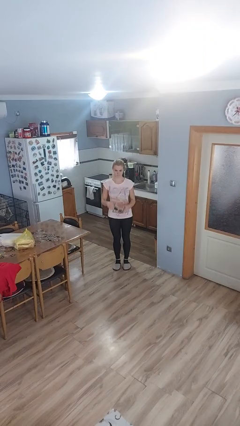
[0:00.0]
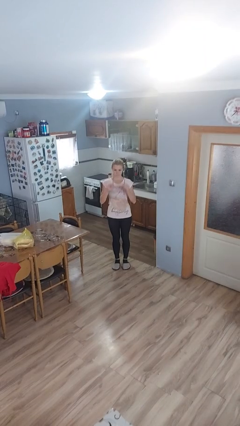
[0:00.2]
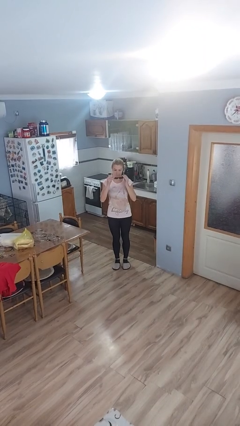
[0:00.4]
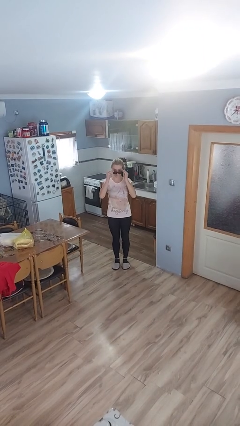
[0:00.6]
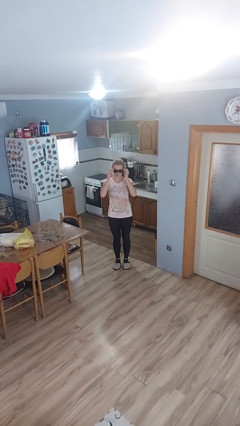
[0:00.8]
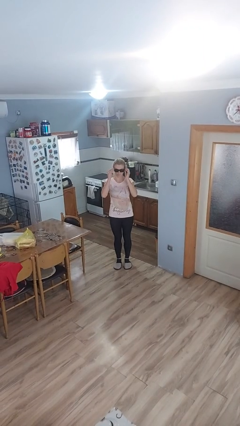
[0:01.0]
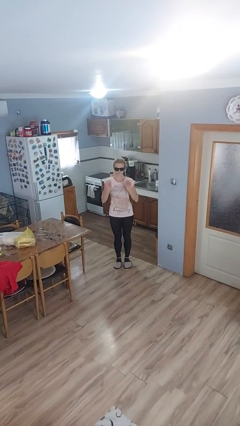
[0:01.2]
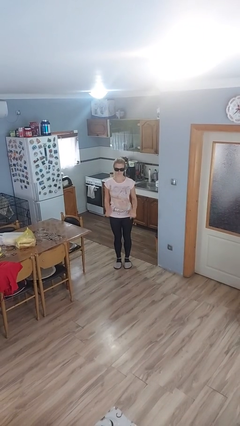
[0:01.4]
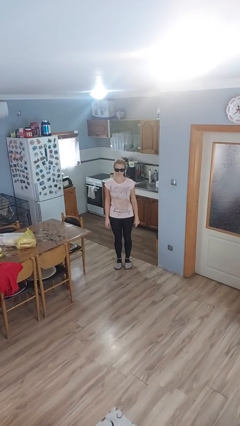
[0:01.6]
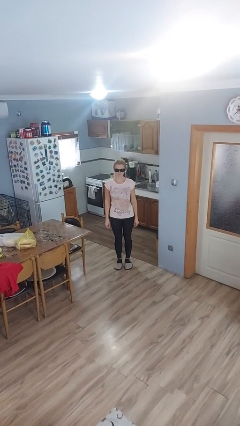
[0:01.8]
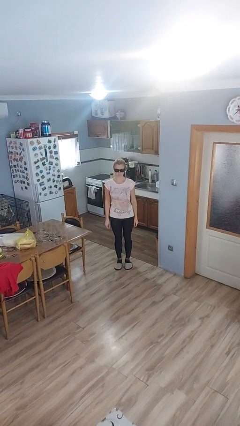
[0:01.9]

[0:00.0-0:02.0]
person puts on sunglasses

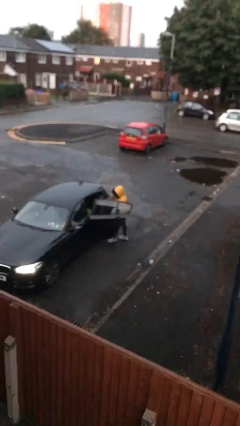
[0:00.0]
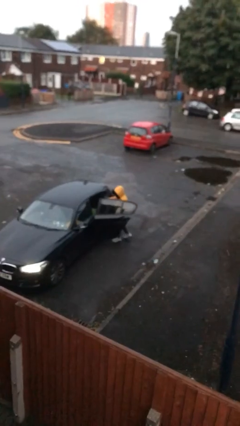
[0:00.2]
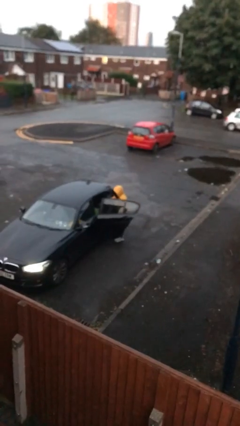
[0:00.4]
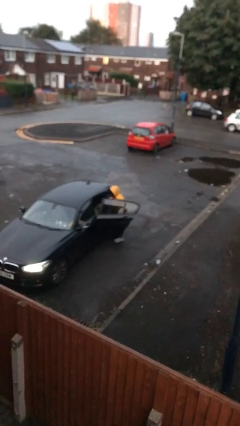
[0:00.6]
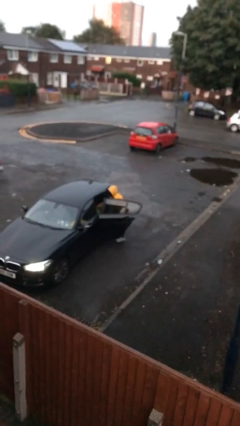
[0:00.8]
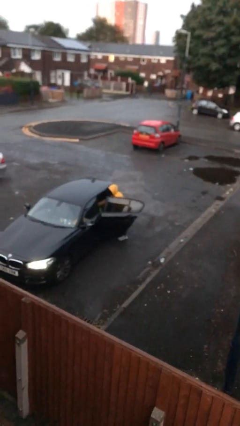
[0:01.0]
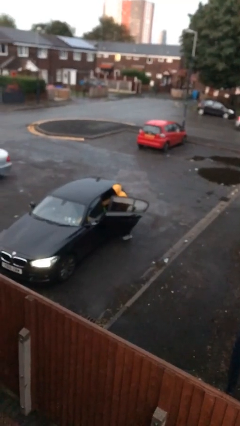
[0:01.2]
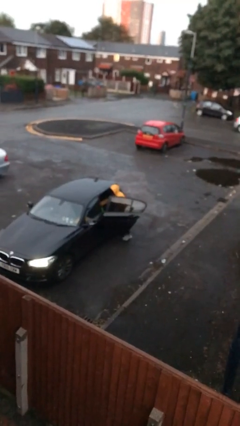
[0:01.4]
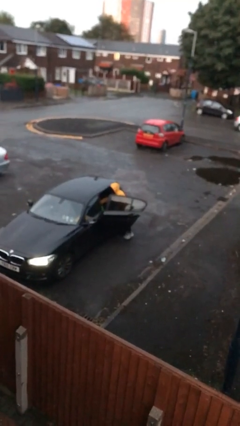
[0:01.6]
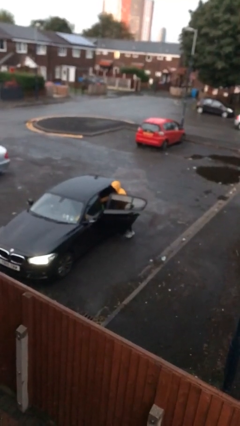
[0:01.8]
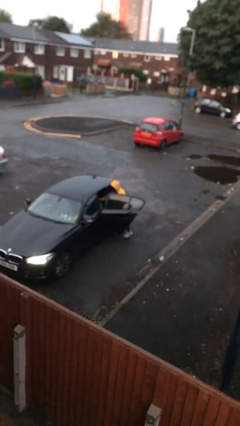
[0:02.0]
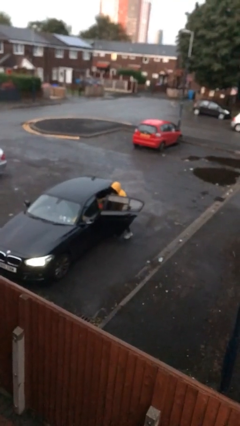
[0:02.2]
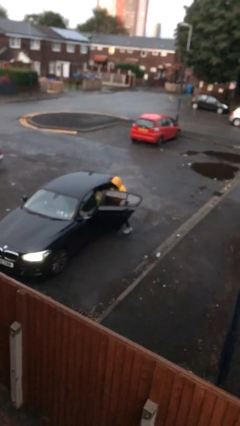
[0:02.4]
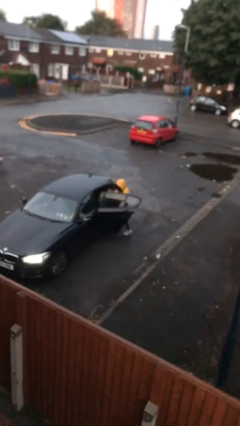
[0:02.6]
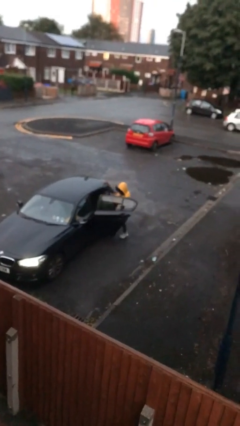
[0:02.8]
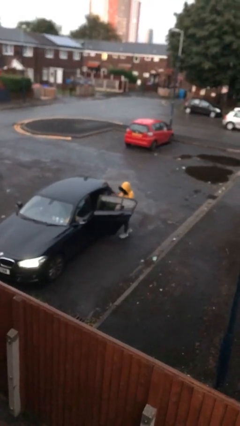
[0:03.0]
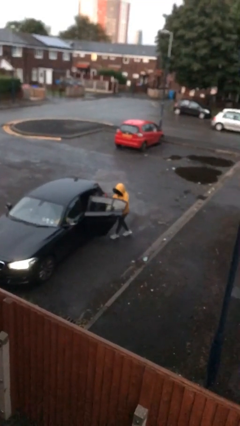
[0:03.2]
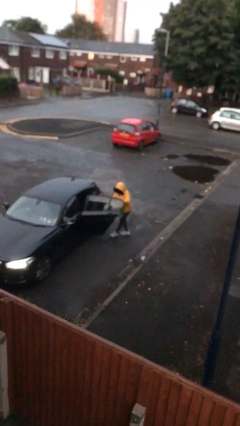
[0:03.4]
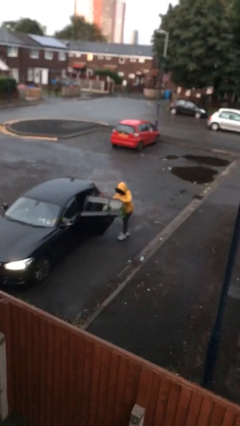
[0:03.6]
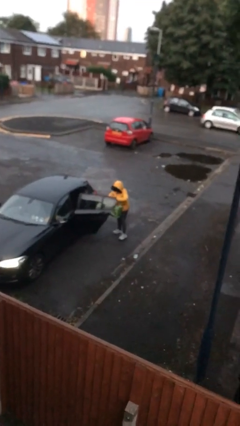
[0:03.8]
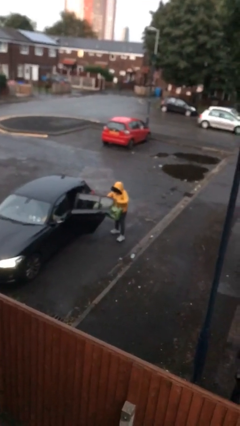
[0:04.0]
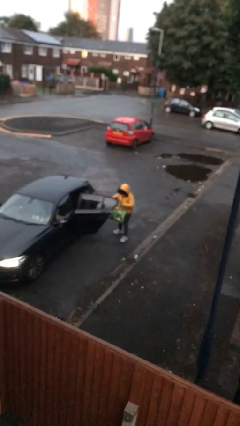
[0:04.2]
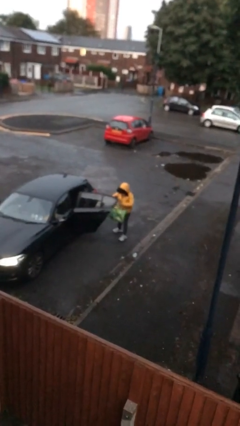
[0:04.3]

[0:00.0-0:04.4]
person unloads car

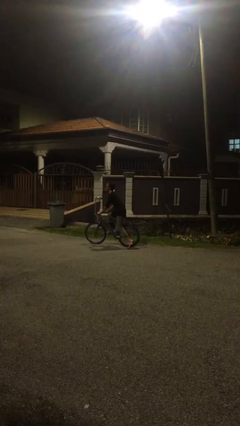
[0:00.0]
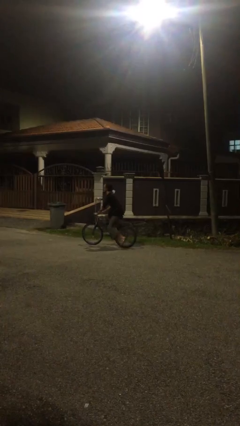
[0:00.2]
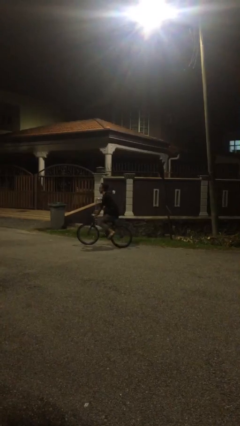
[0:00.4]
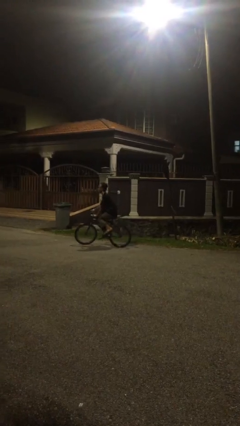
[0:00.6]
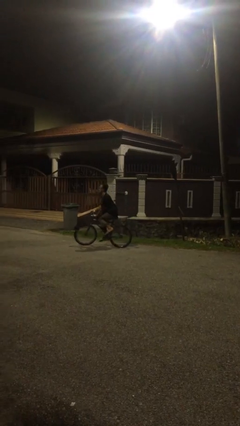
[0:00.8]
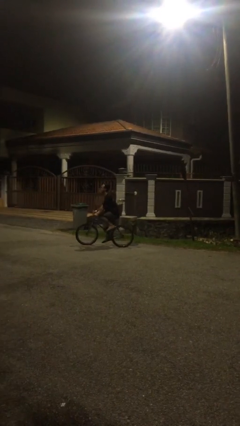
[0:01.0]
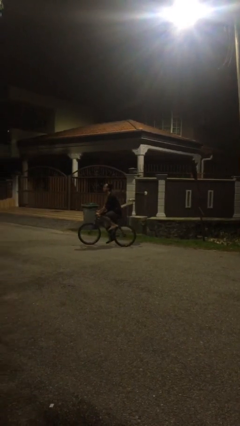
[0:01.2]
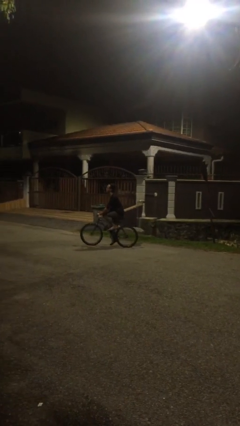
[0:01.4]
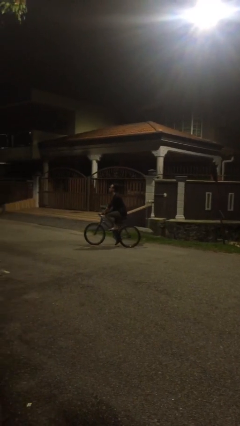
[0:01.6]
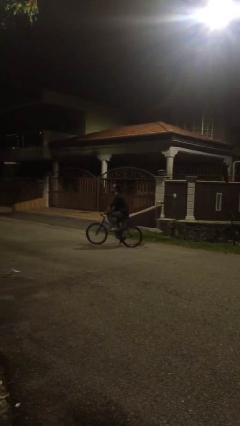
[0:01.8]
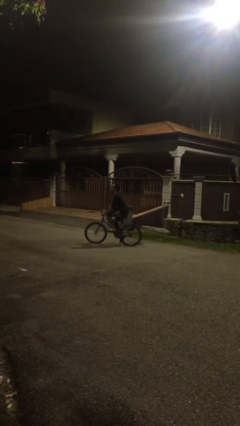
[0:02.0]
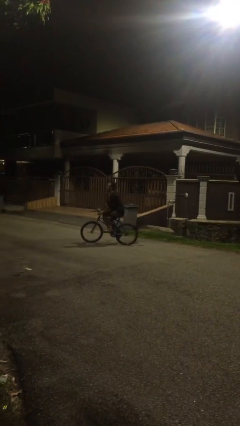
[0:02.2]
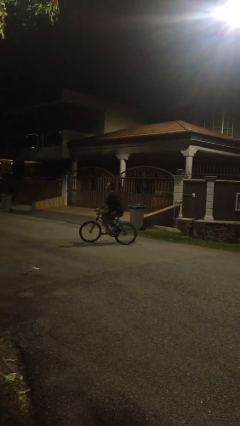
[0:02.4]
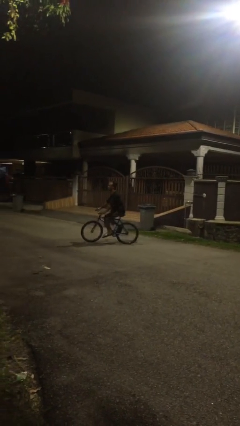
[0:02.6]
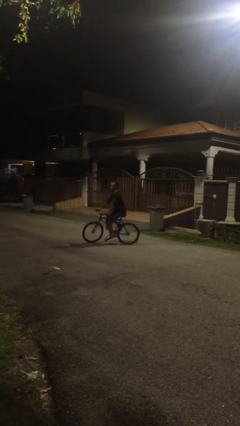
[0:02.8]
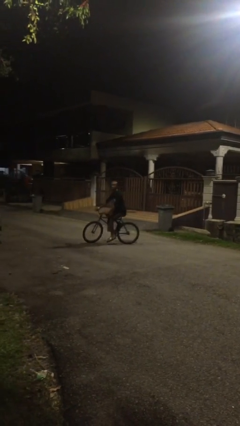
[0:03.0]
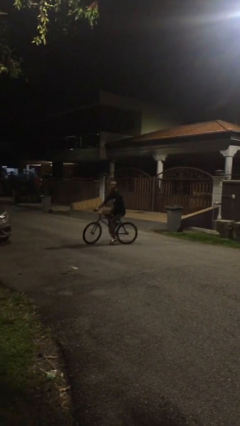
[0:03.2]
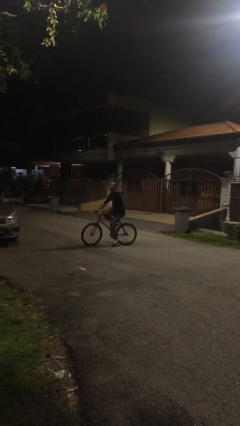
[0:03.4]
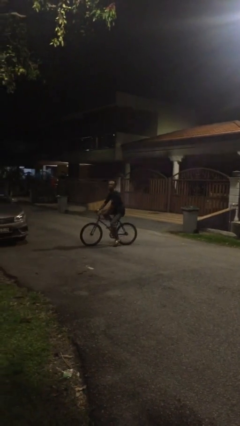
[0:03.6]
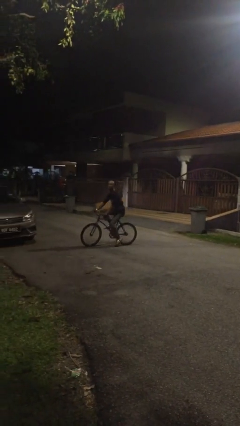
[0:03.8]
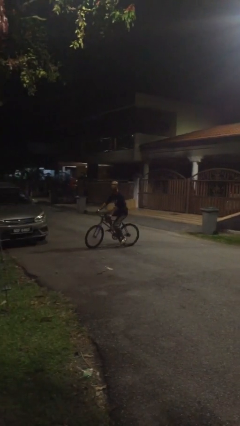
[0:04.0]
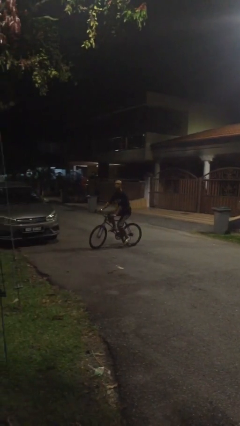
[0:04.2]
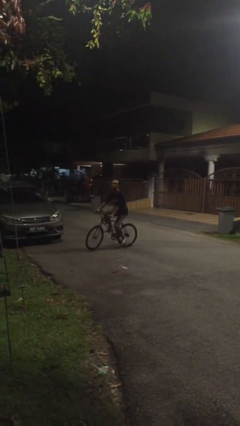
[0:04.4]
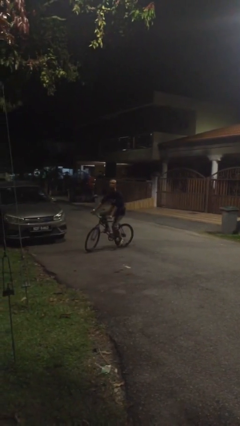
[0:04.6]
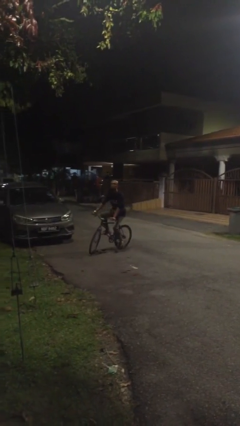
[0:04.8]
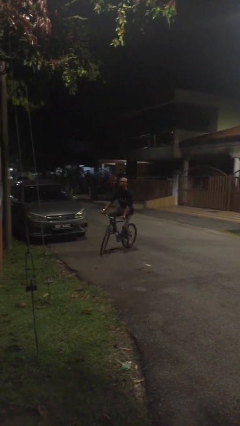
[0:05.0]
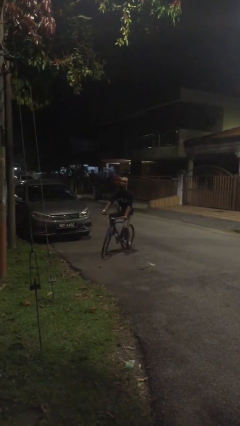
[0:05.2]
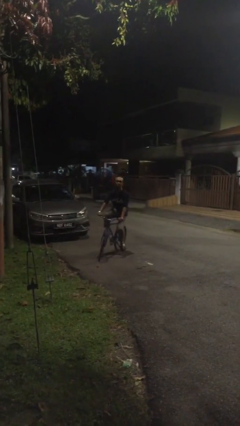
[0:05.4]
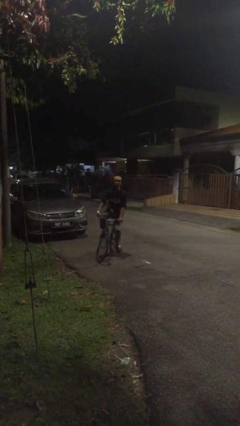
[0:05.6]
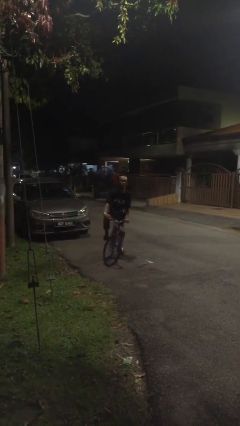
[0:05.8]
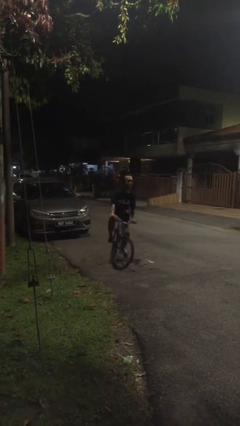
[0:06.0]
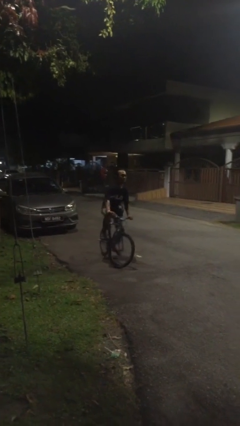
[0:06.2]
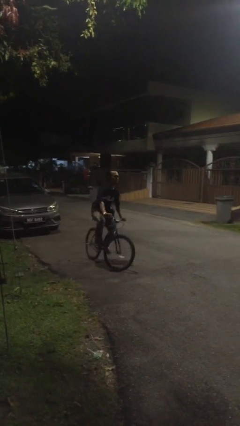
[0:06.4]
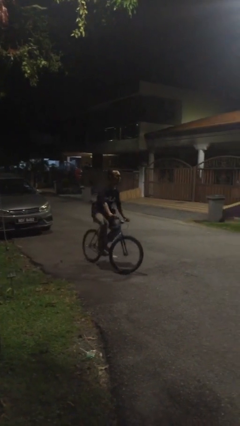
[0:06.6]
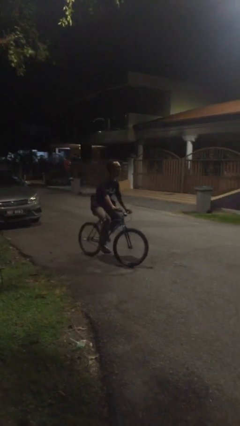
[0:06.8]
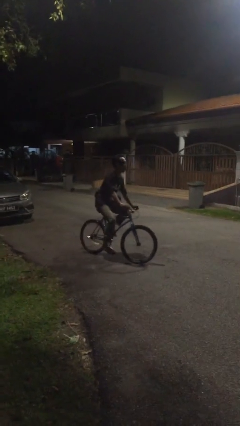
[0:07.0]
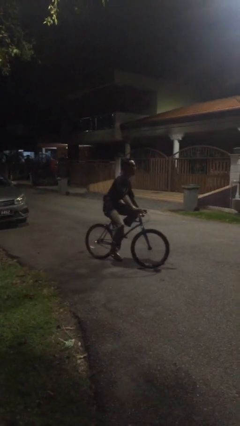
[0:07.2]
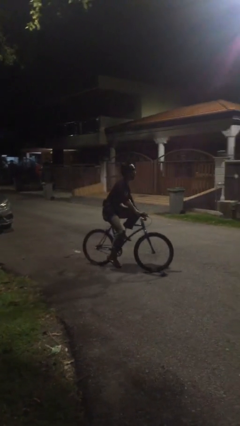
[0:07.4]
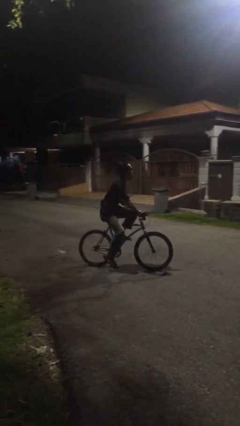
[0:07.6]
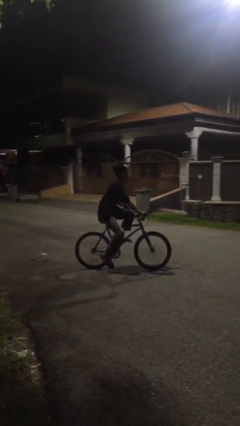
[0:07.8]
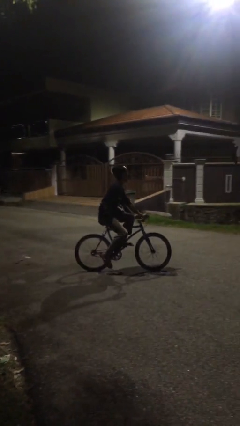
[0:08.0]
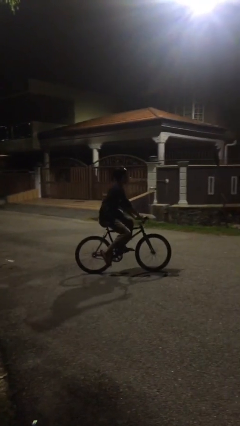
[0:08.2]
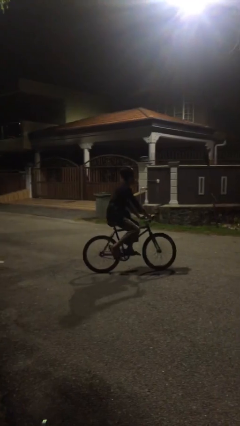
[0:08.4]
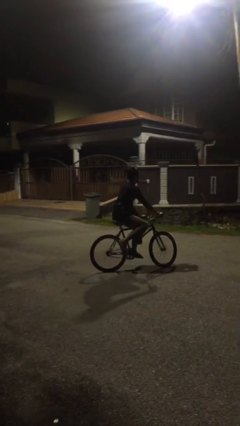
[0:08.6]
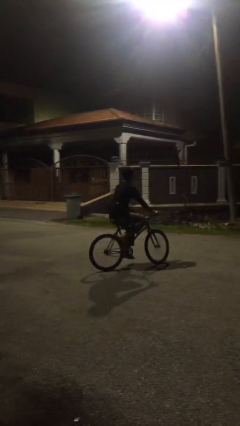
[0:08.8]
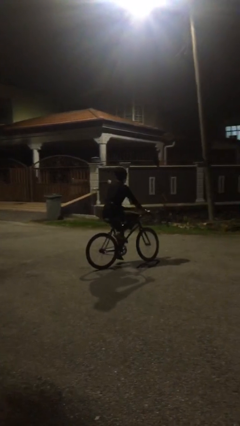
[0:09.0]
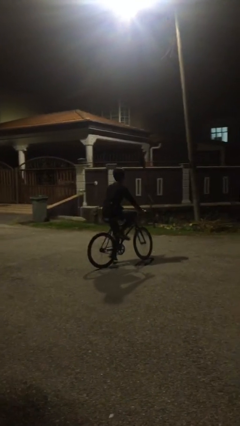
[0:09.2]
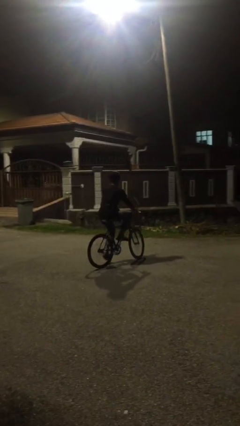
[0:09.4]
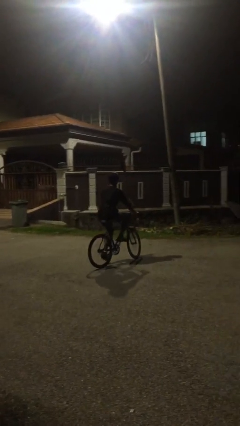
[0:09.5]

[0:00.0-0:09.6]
person rides bicycle

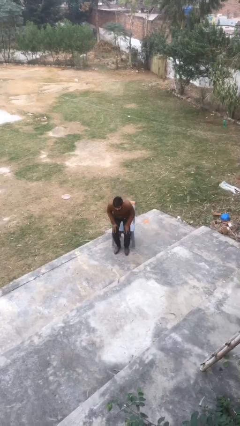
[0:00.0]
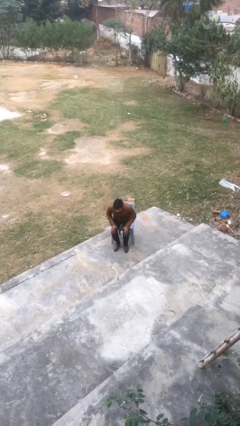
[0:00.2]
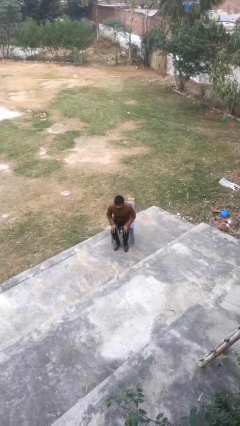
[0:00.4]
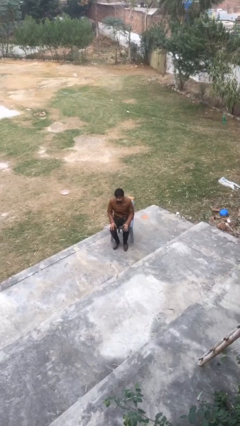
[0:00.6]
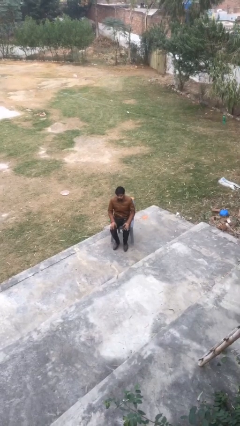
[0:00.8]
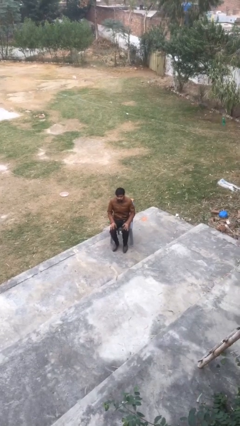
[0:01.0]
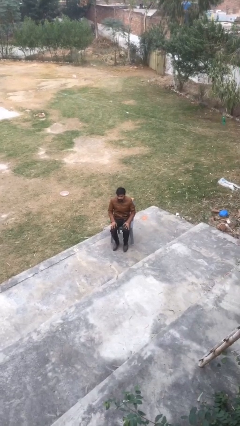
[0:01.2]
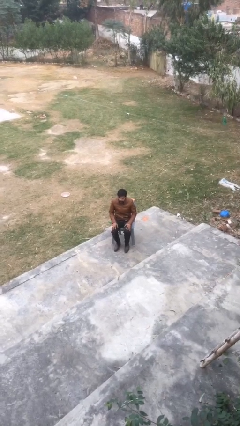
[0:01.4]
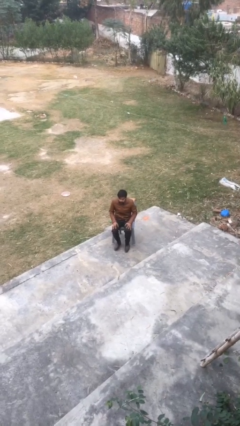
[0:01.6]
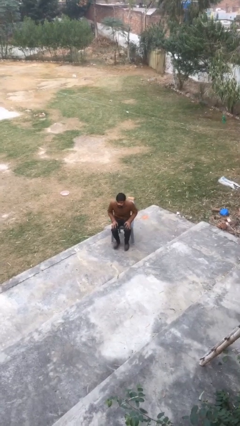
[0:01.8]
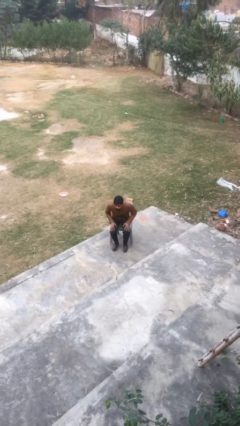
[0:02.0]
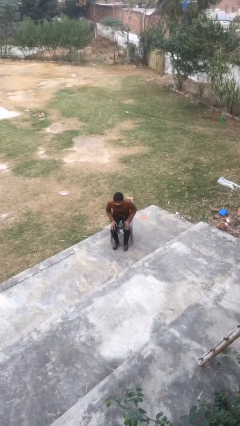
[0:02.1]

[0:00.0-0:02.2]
person sits down
